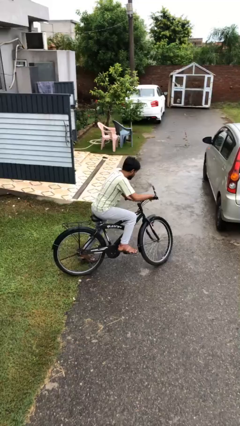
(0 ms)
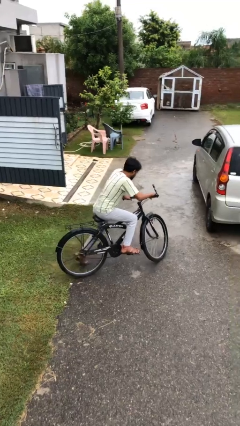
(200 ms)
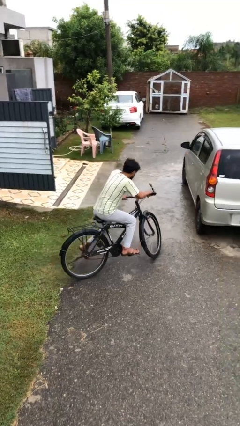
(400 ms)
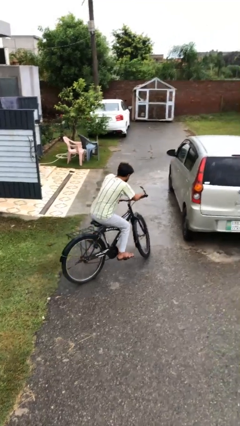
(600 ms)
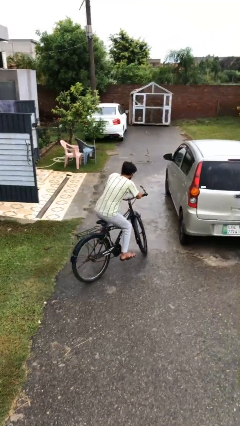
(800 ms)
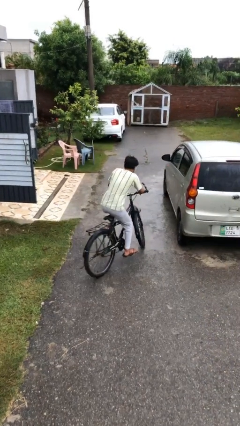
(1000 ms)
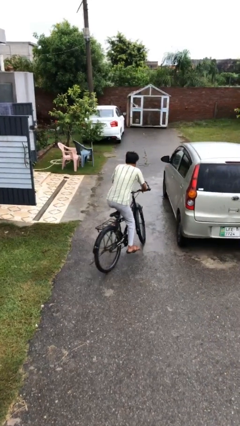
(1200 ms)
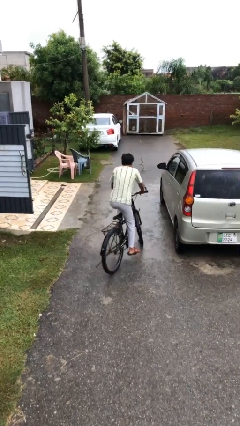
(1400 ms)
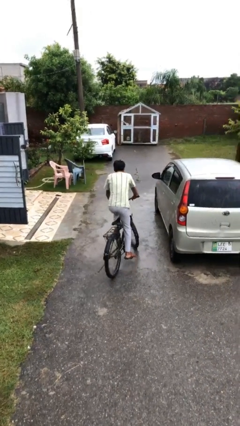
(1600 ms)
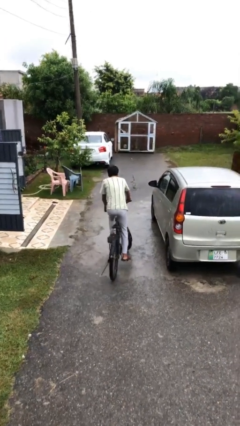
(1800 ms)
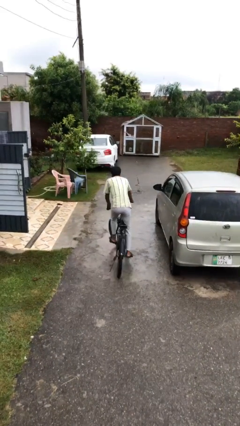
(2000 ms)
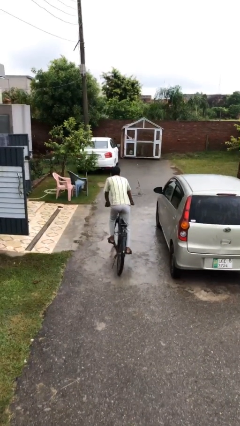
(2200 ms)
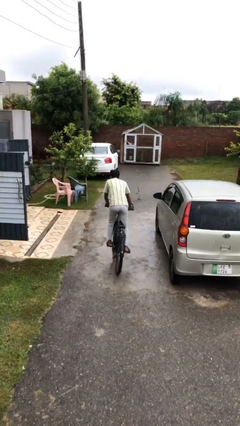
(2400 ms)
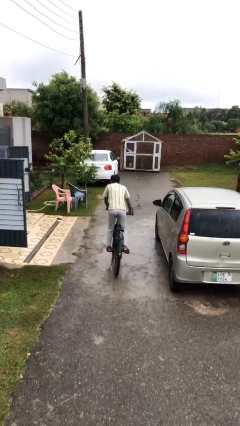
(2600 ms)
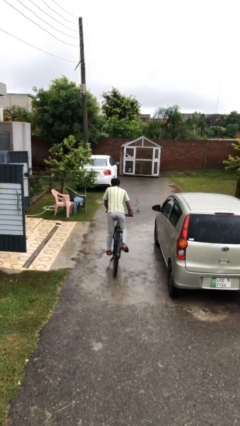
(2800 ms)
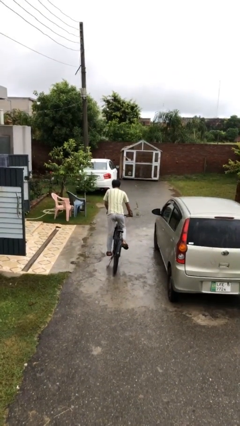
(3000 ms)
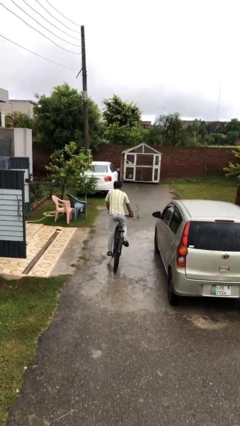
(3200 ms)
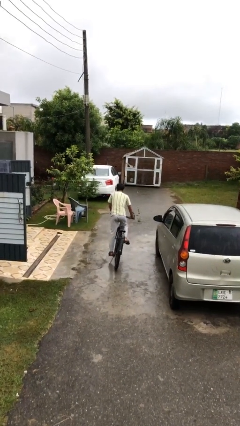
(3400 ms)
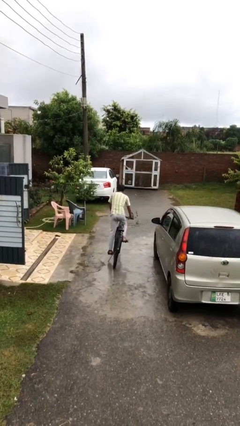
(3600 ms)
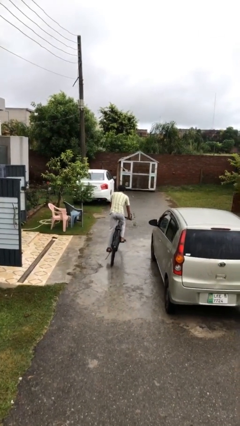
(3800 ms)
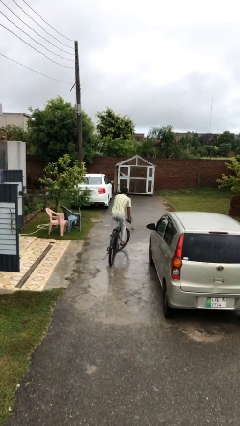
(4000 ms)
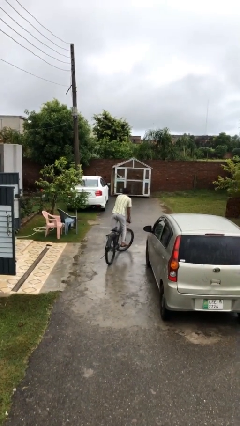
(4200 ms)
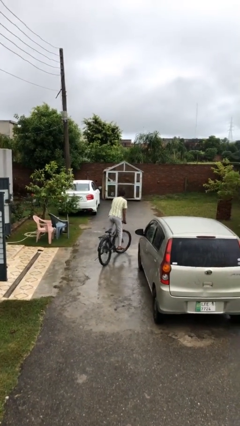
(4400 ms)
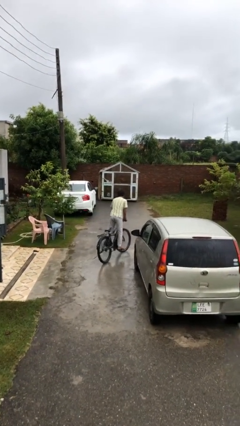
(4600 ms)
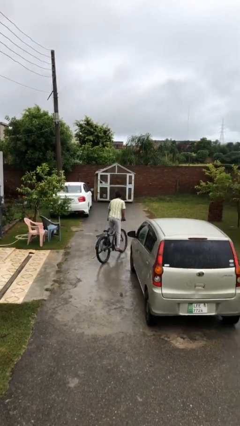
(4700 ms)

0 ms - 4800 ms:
person rides bicycle

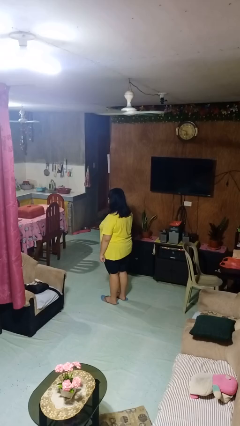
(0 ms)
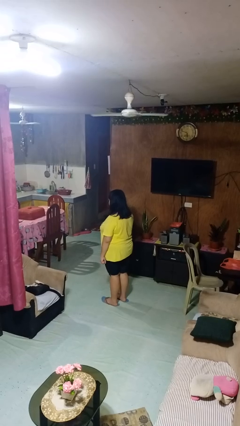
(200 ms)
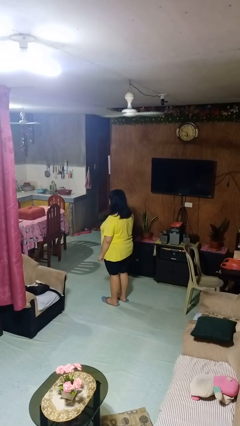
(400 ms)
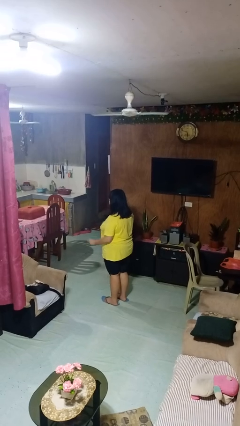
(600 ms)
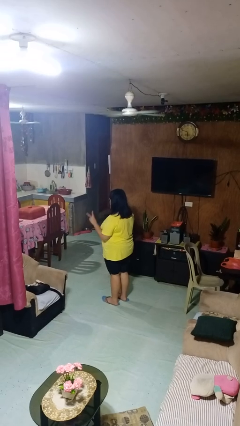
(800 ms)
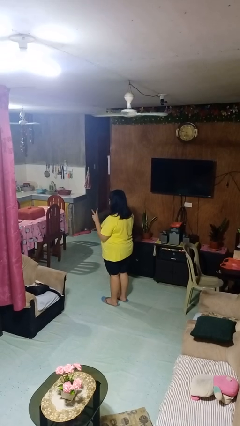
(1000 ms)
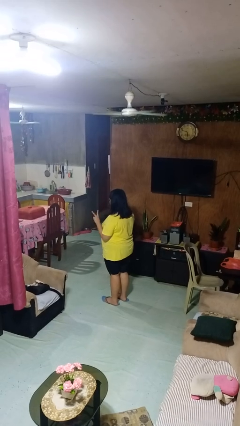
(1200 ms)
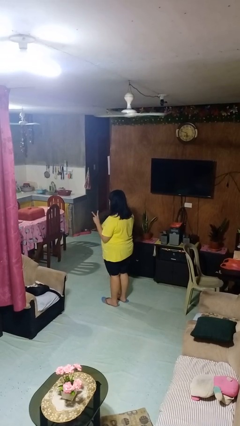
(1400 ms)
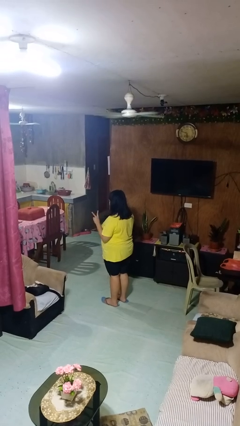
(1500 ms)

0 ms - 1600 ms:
person gestures peace

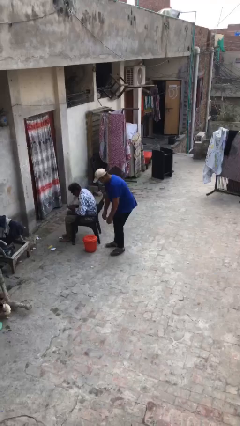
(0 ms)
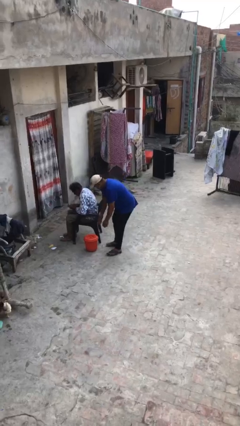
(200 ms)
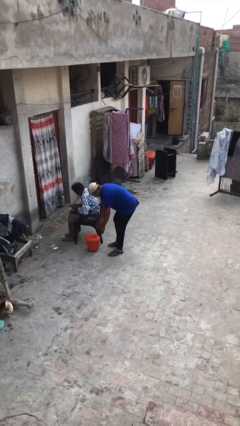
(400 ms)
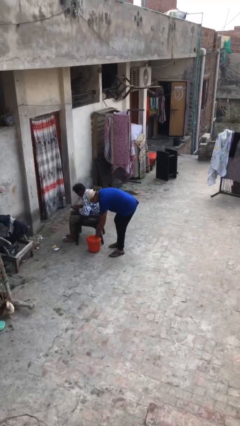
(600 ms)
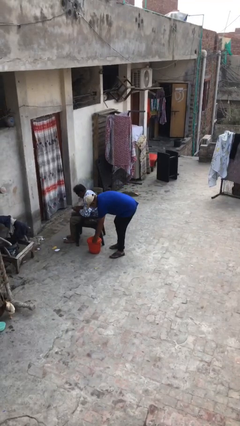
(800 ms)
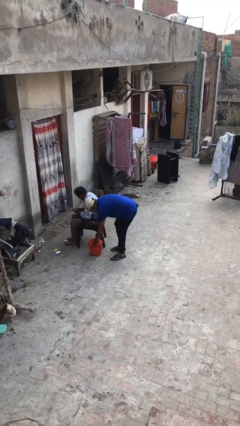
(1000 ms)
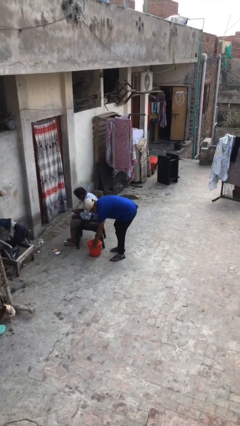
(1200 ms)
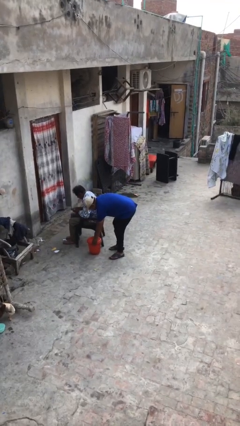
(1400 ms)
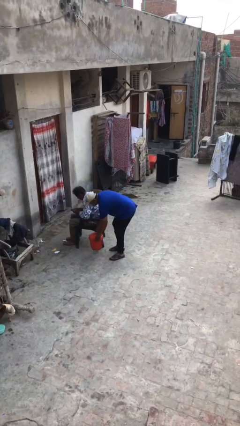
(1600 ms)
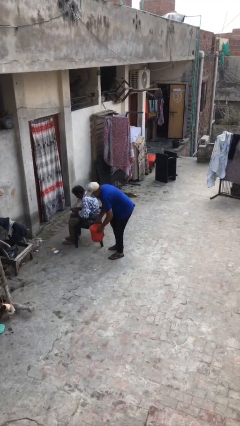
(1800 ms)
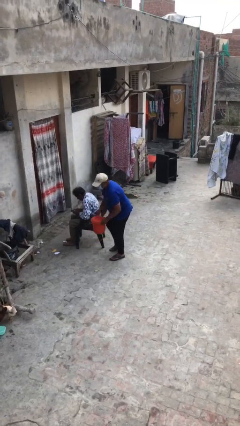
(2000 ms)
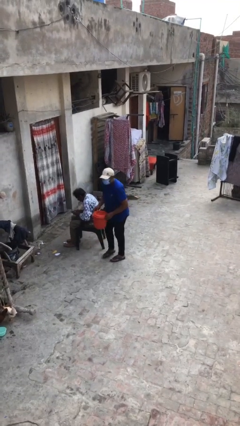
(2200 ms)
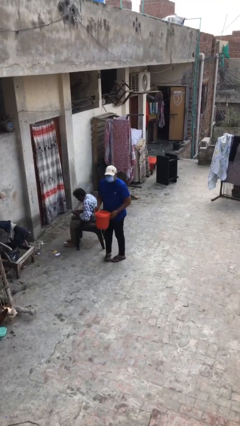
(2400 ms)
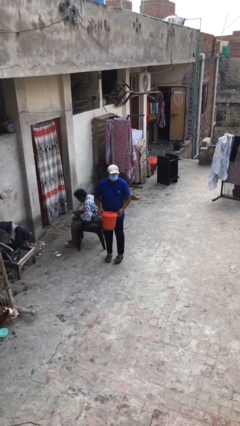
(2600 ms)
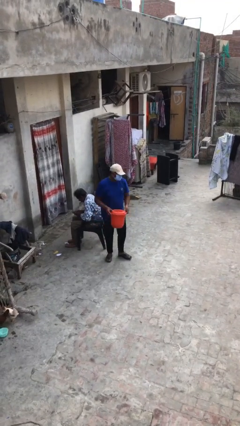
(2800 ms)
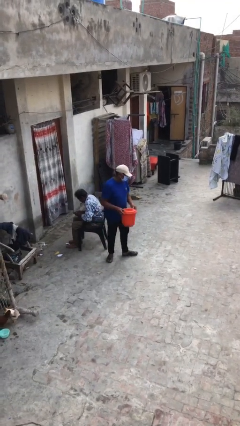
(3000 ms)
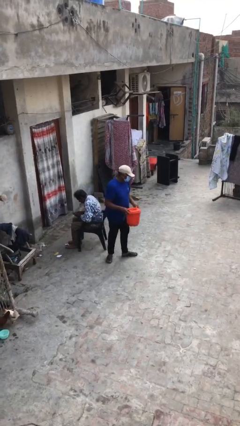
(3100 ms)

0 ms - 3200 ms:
person steals object from person

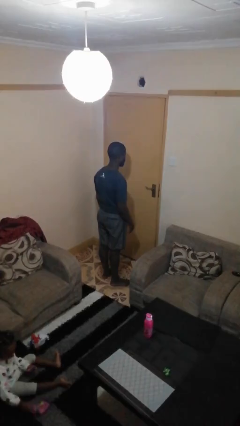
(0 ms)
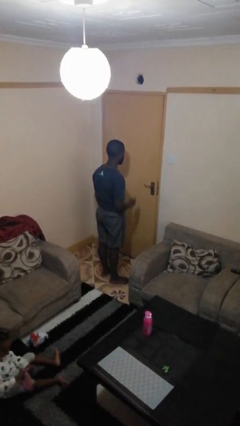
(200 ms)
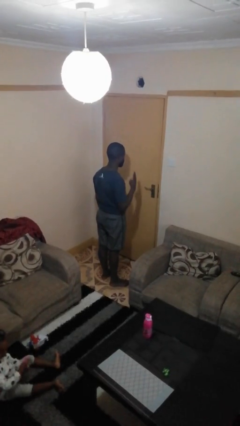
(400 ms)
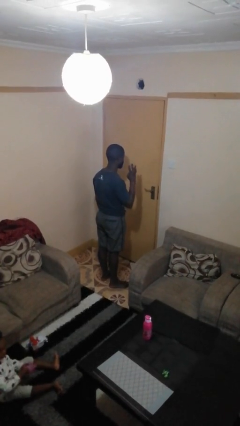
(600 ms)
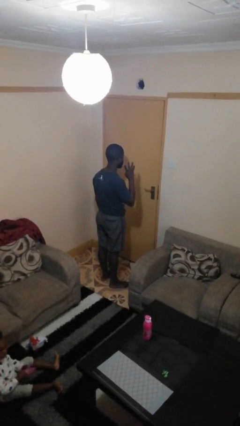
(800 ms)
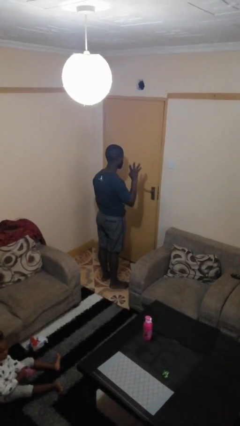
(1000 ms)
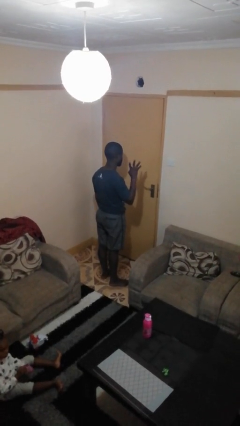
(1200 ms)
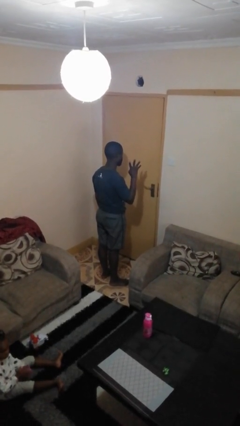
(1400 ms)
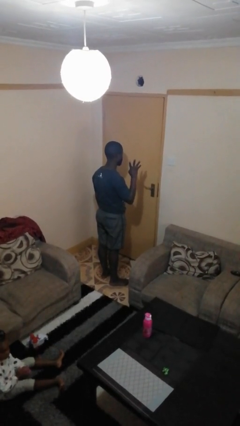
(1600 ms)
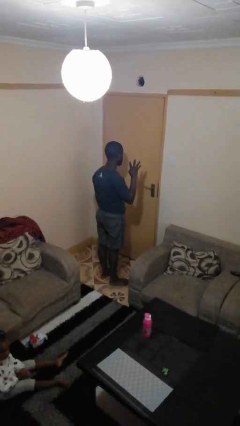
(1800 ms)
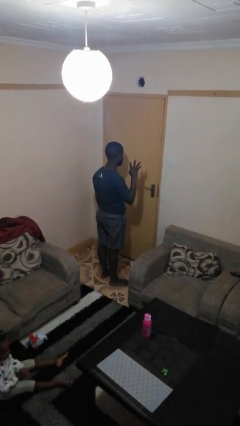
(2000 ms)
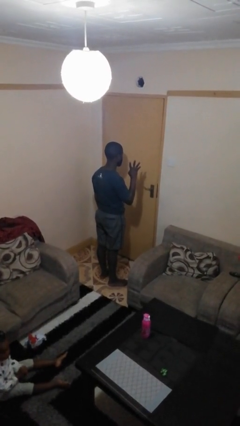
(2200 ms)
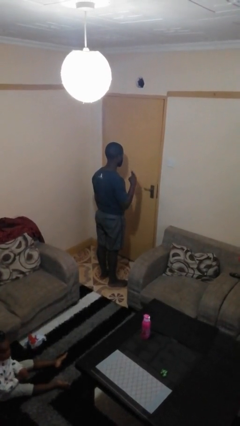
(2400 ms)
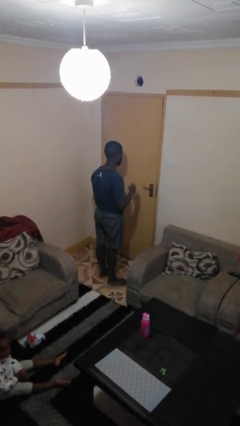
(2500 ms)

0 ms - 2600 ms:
person gestures number four

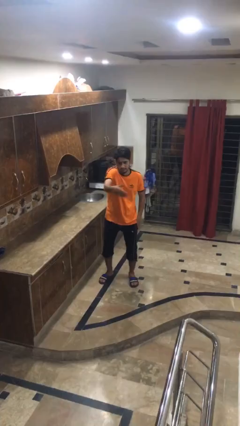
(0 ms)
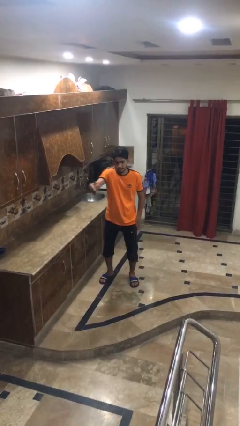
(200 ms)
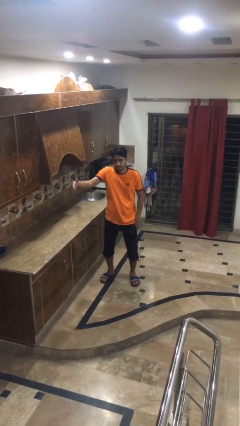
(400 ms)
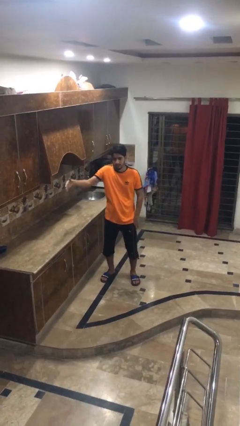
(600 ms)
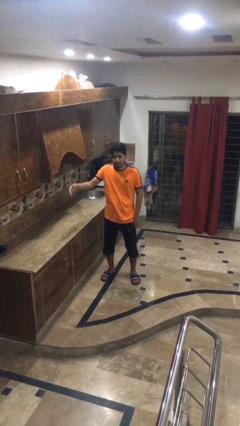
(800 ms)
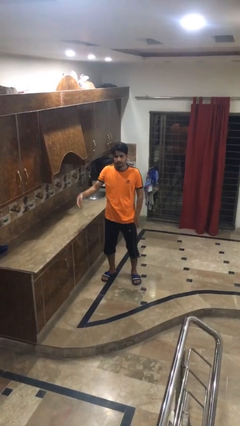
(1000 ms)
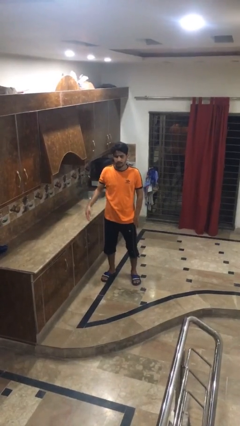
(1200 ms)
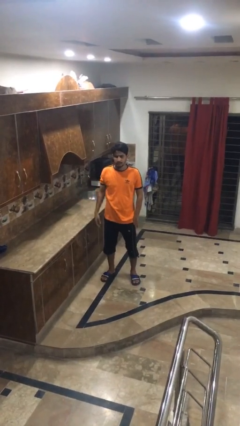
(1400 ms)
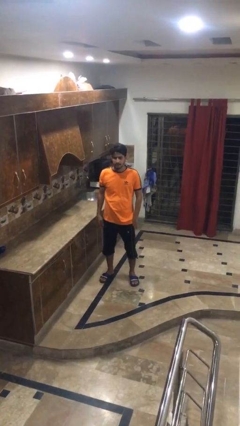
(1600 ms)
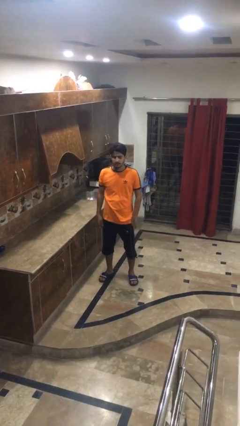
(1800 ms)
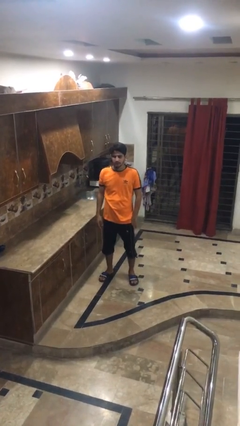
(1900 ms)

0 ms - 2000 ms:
person gestures swipe right

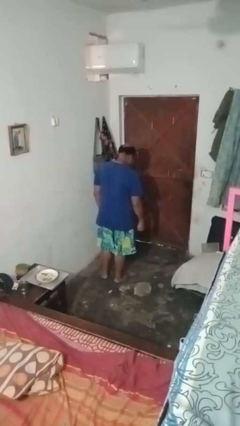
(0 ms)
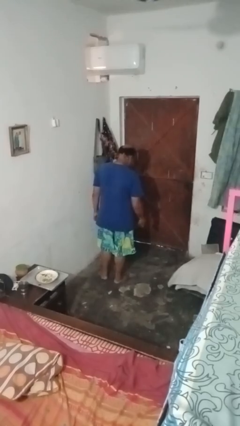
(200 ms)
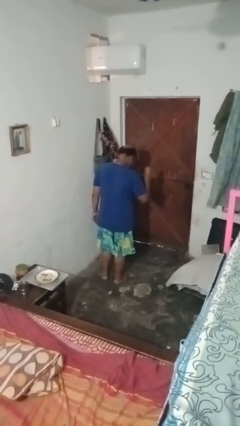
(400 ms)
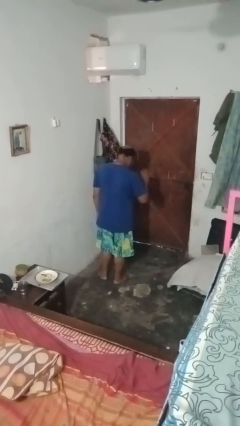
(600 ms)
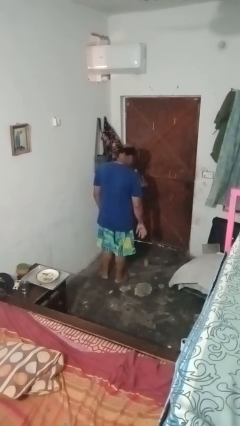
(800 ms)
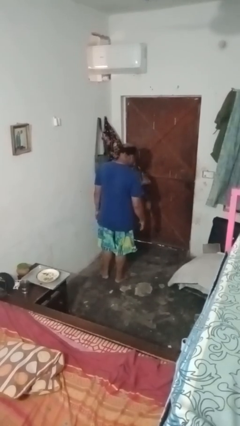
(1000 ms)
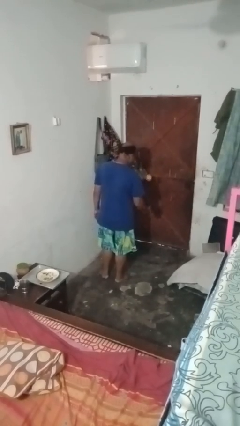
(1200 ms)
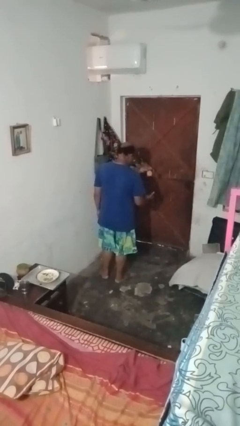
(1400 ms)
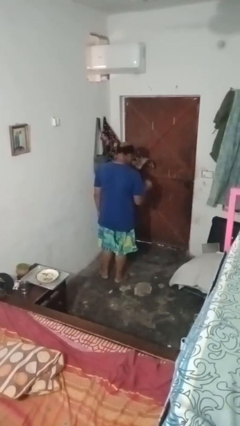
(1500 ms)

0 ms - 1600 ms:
person bounces ball on floor

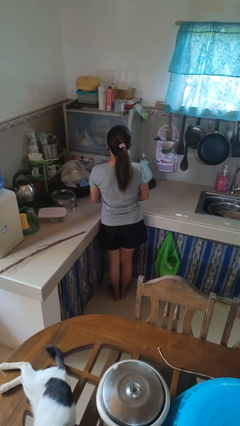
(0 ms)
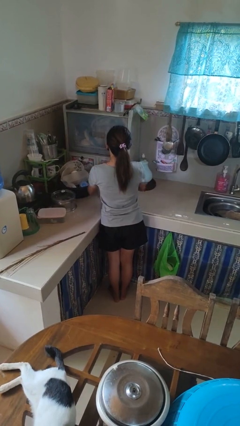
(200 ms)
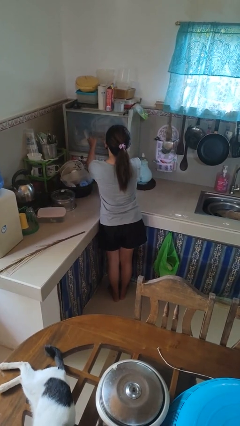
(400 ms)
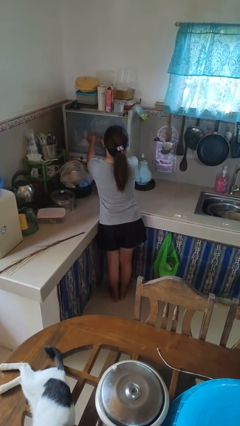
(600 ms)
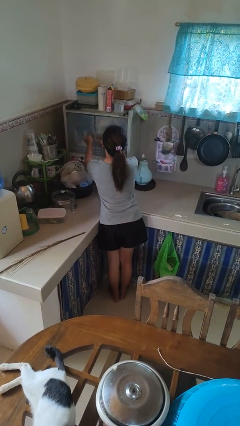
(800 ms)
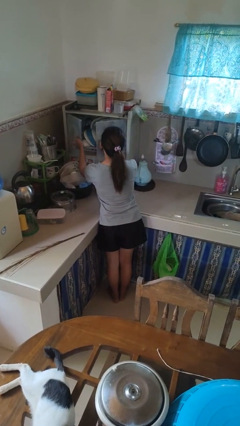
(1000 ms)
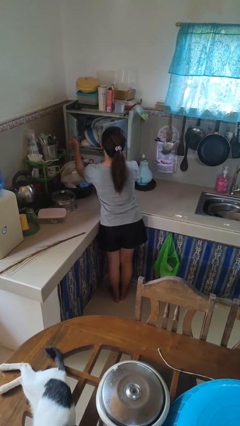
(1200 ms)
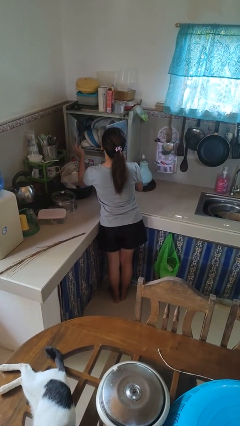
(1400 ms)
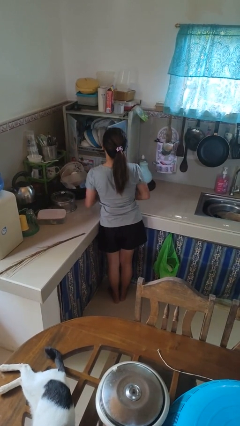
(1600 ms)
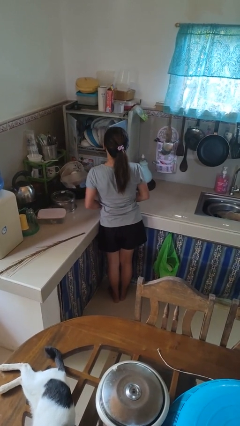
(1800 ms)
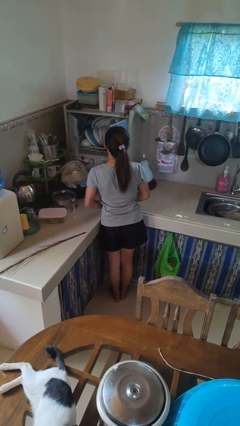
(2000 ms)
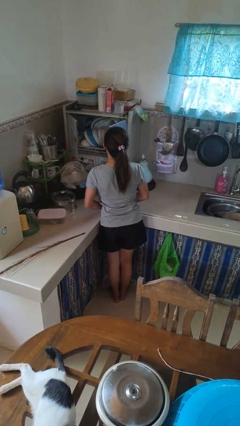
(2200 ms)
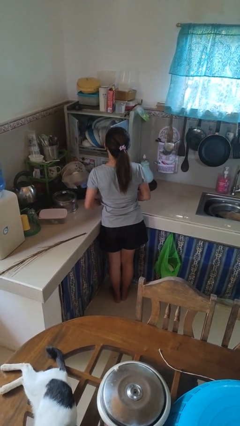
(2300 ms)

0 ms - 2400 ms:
person opens kitchen drawer
